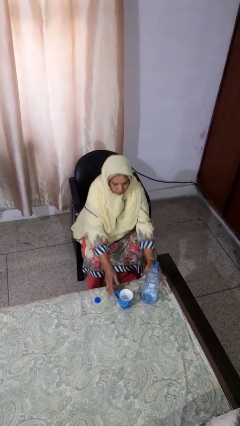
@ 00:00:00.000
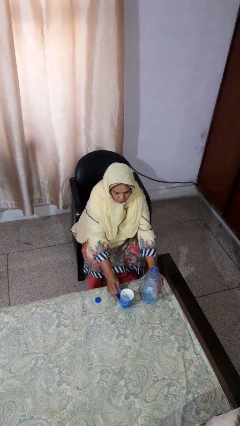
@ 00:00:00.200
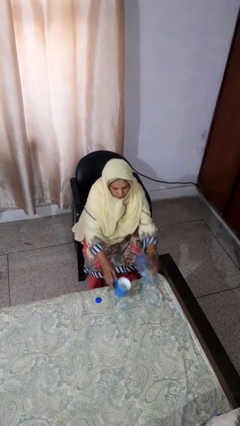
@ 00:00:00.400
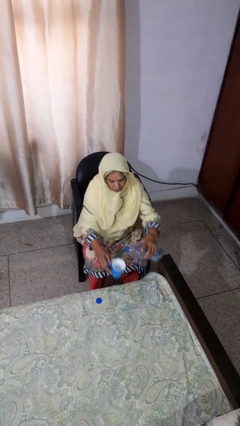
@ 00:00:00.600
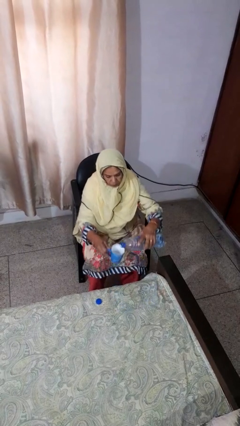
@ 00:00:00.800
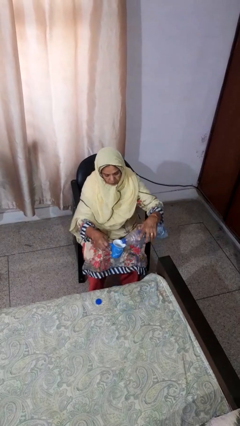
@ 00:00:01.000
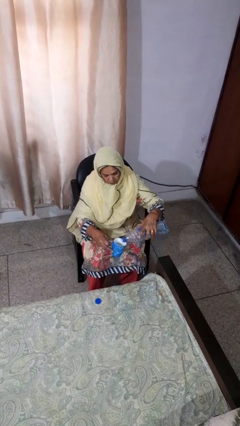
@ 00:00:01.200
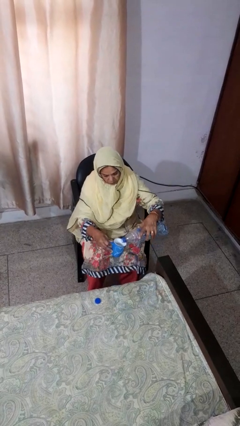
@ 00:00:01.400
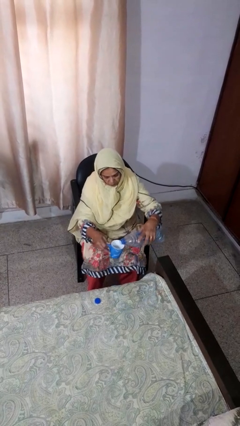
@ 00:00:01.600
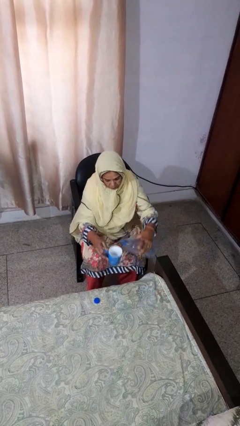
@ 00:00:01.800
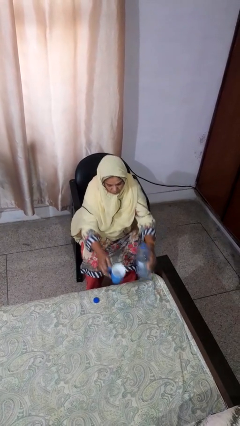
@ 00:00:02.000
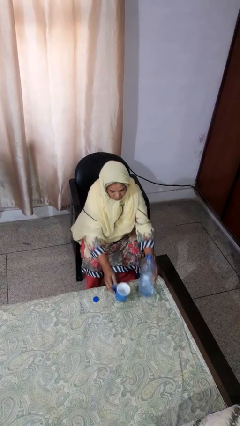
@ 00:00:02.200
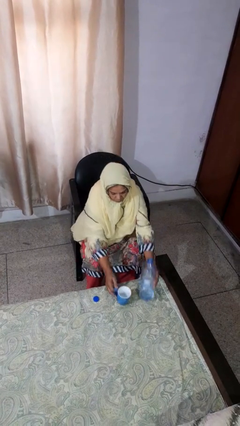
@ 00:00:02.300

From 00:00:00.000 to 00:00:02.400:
person pours liquid into cup

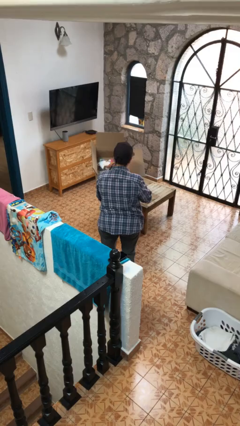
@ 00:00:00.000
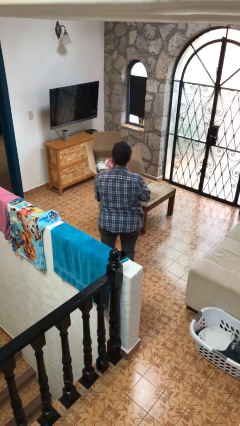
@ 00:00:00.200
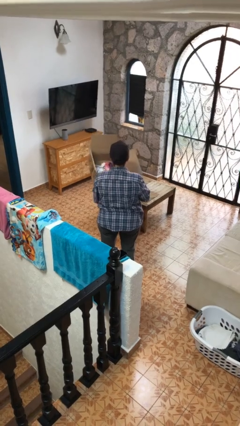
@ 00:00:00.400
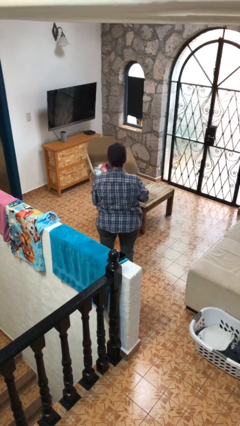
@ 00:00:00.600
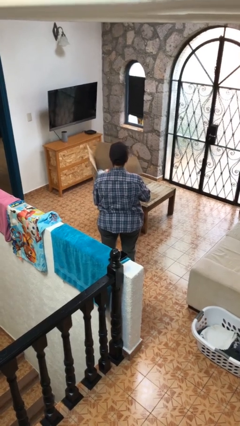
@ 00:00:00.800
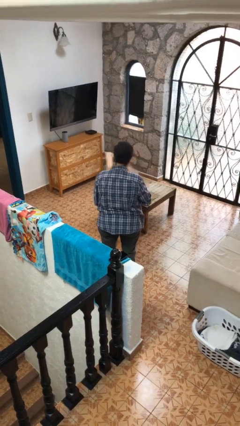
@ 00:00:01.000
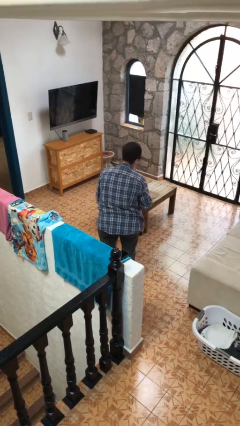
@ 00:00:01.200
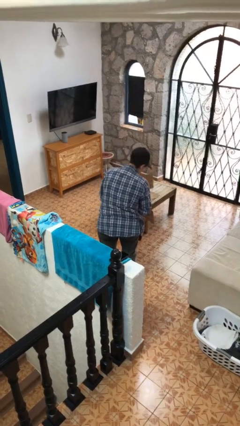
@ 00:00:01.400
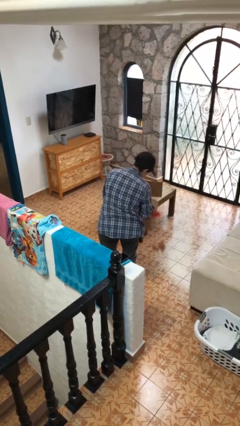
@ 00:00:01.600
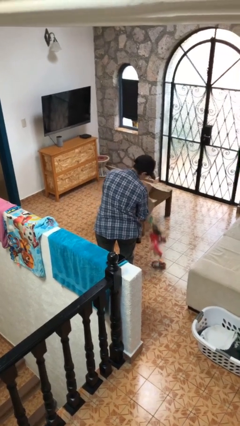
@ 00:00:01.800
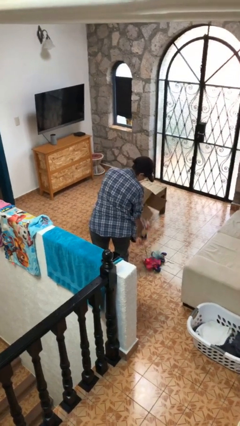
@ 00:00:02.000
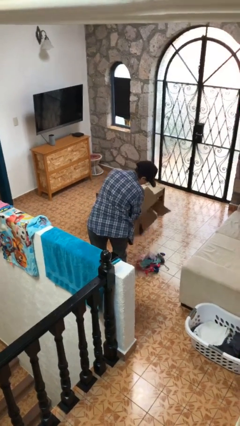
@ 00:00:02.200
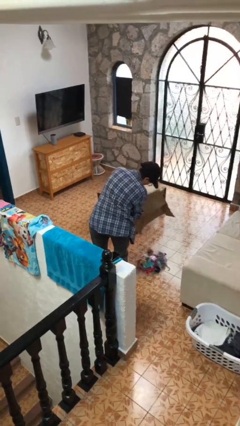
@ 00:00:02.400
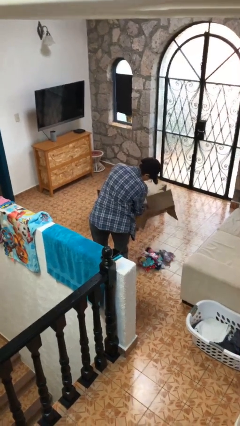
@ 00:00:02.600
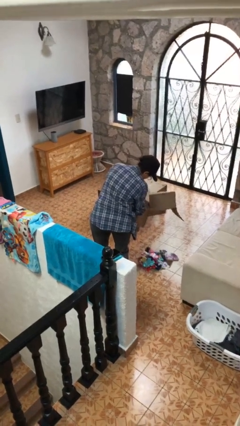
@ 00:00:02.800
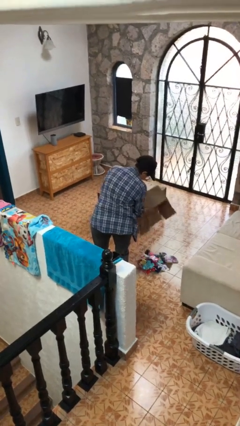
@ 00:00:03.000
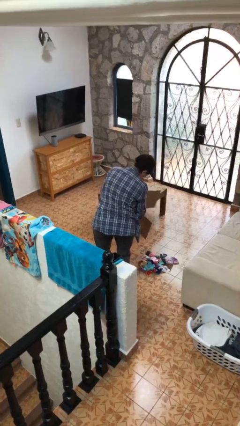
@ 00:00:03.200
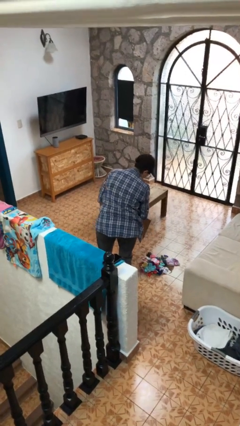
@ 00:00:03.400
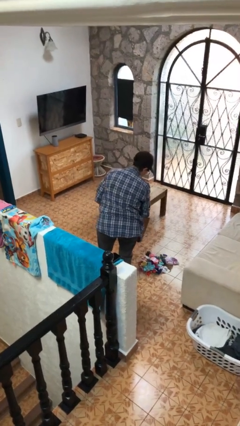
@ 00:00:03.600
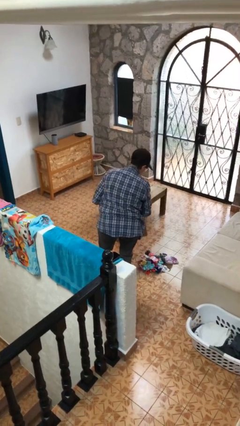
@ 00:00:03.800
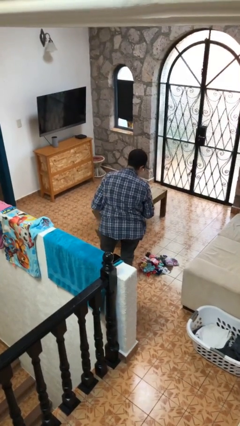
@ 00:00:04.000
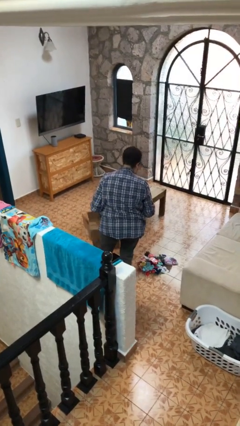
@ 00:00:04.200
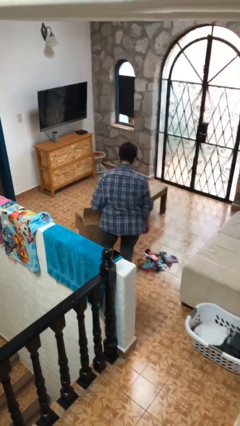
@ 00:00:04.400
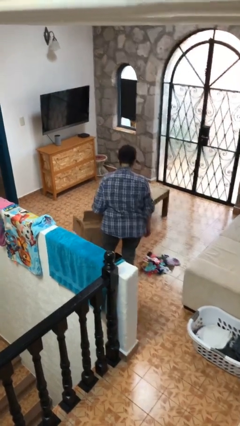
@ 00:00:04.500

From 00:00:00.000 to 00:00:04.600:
person unloads box onto floor

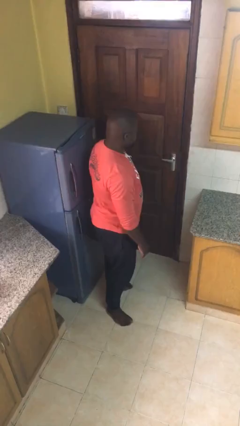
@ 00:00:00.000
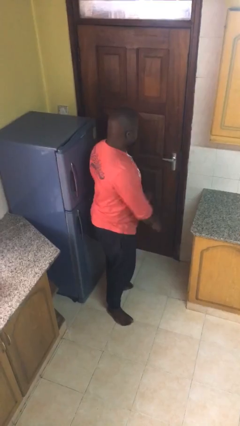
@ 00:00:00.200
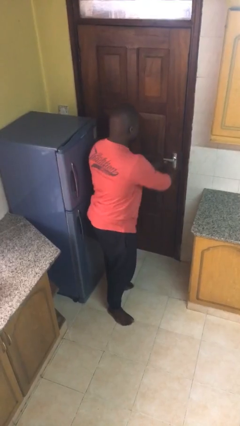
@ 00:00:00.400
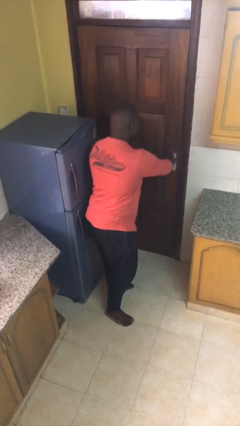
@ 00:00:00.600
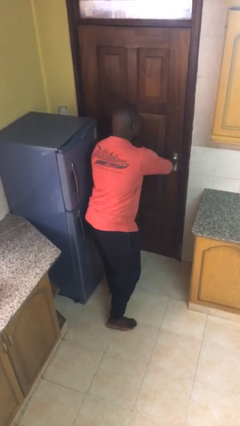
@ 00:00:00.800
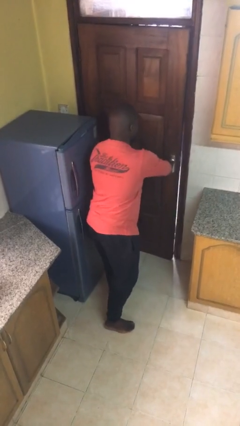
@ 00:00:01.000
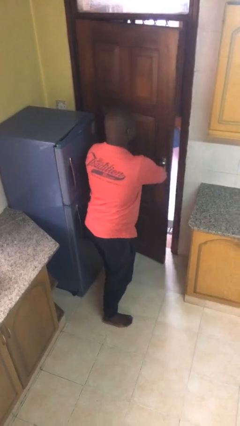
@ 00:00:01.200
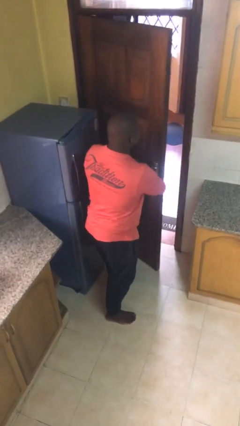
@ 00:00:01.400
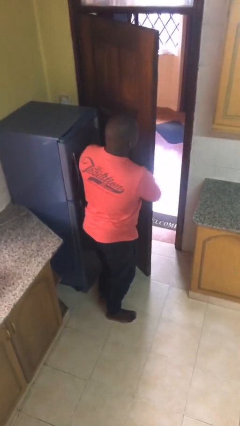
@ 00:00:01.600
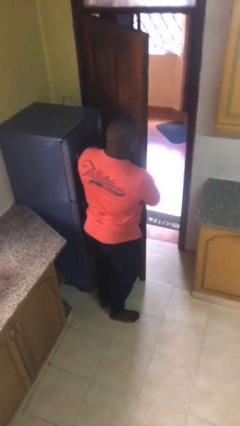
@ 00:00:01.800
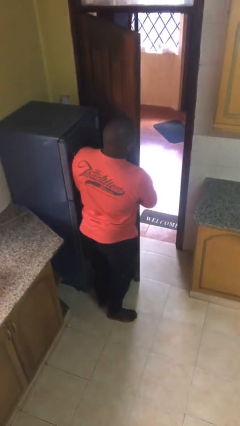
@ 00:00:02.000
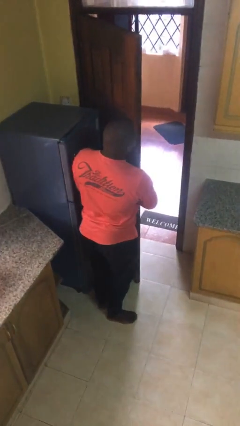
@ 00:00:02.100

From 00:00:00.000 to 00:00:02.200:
person opens facility door

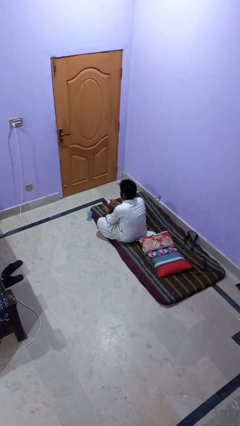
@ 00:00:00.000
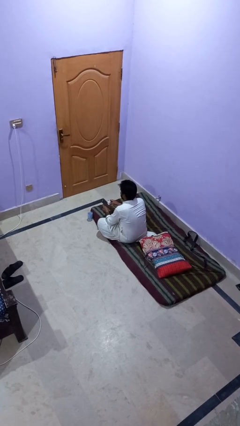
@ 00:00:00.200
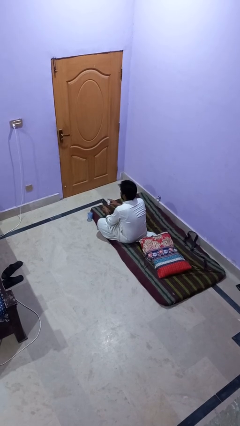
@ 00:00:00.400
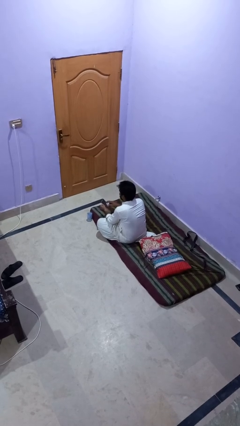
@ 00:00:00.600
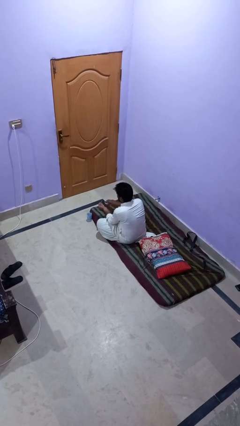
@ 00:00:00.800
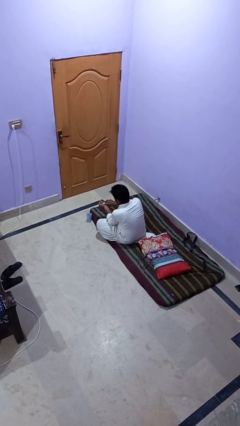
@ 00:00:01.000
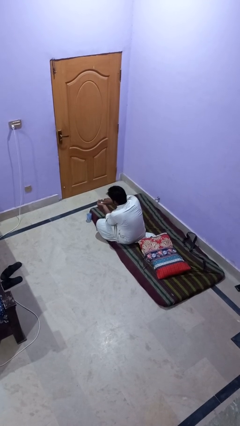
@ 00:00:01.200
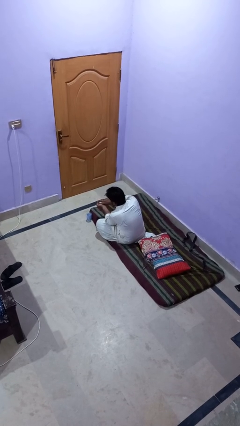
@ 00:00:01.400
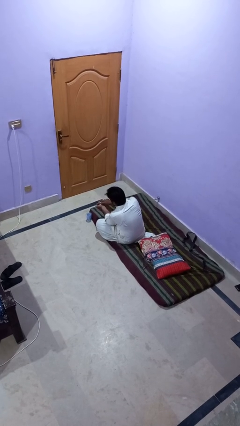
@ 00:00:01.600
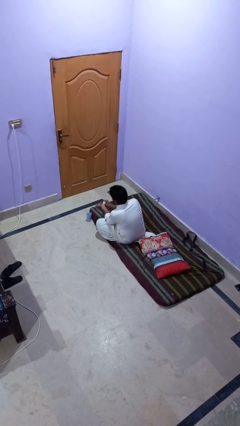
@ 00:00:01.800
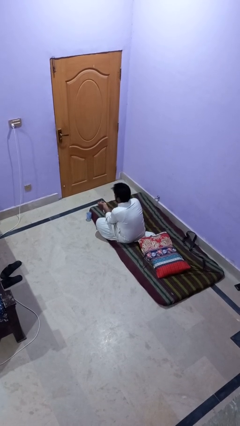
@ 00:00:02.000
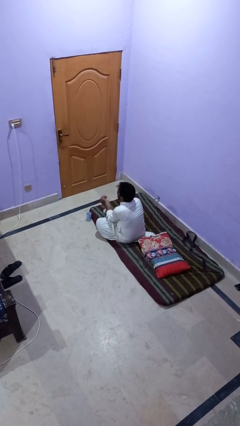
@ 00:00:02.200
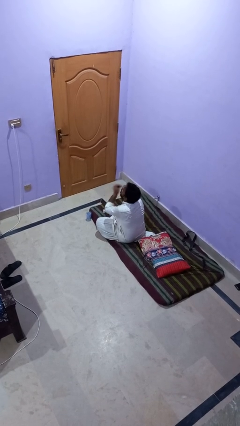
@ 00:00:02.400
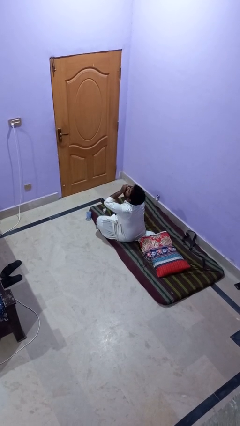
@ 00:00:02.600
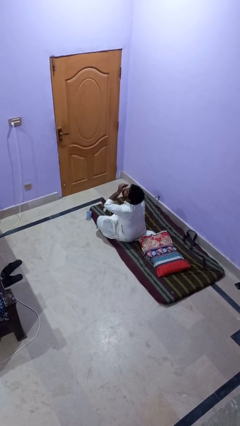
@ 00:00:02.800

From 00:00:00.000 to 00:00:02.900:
person takes medicine pills

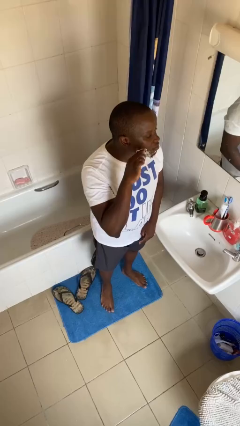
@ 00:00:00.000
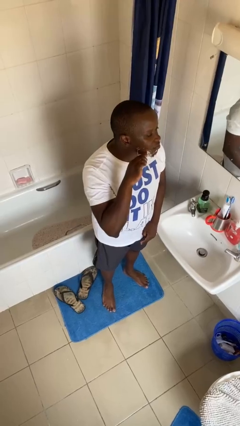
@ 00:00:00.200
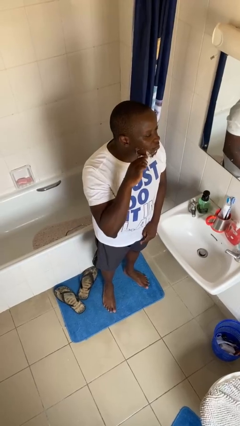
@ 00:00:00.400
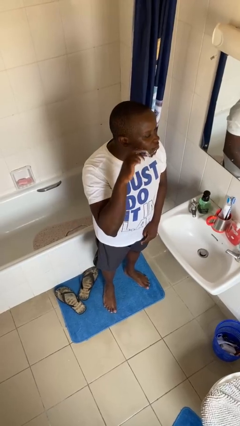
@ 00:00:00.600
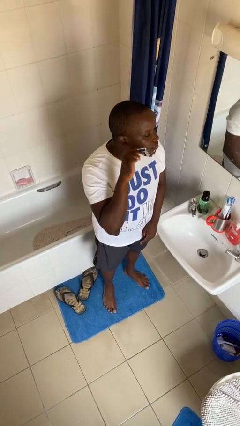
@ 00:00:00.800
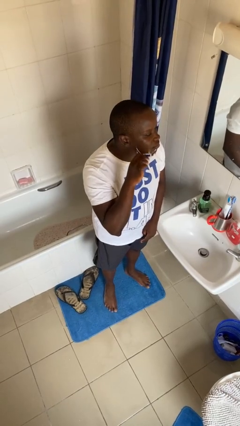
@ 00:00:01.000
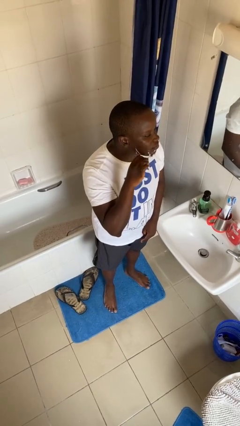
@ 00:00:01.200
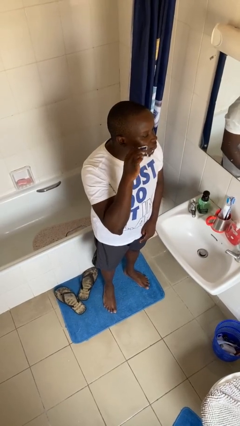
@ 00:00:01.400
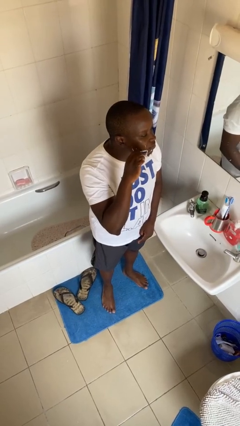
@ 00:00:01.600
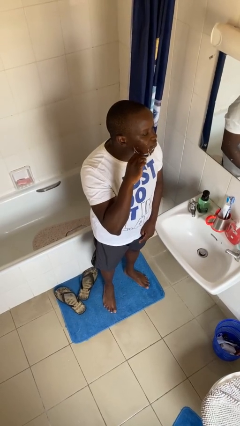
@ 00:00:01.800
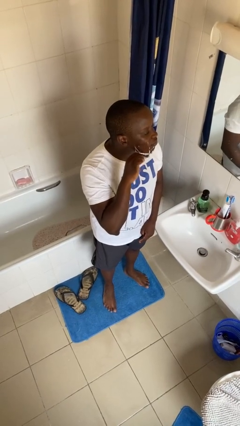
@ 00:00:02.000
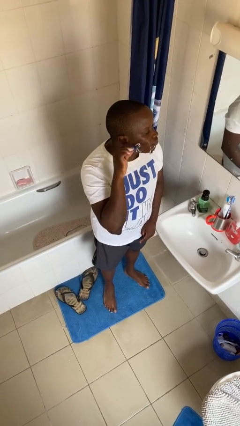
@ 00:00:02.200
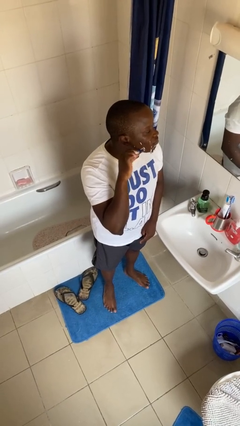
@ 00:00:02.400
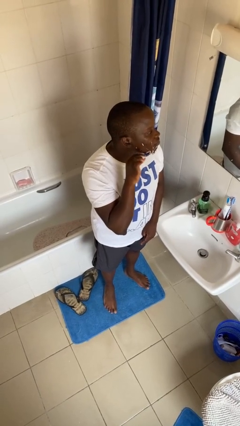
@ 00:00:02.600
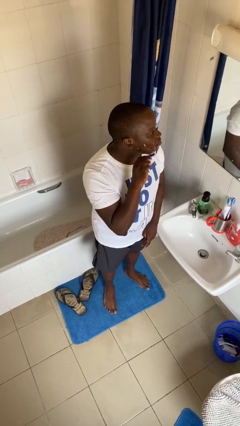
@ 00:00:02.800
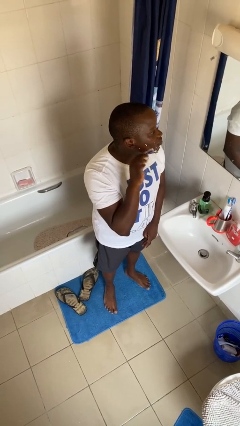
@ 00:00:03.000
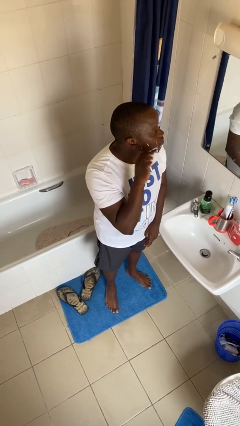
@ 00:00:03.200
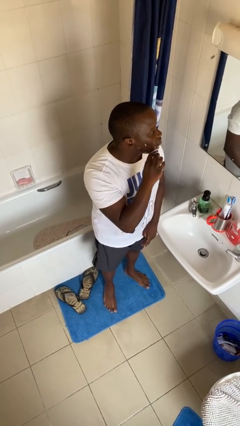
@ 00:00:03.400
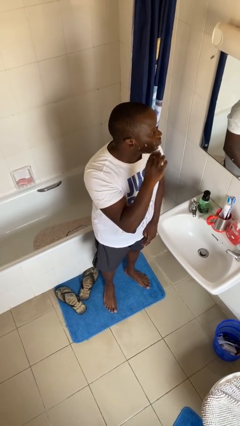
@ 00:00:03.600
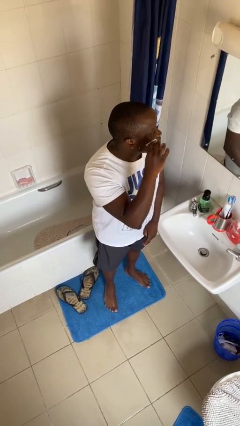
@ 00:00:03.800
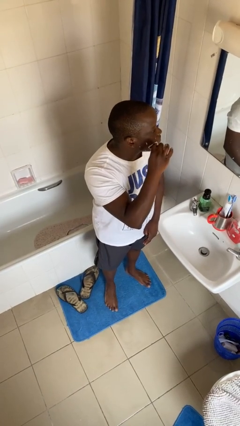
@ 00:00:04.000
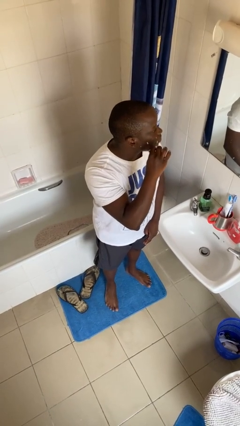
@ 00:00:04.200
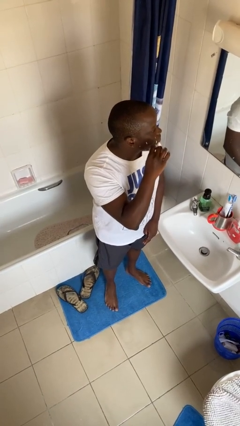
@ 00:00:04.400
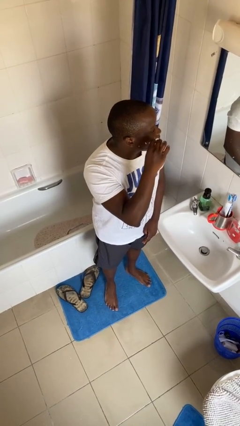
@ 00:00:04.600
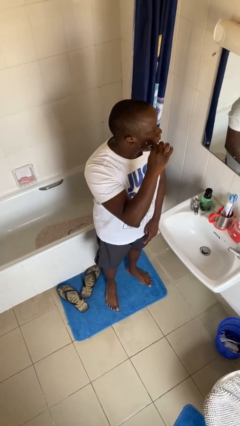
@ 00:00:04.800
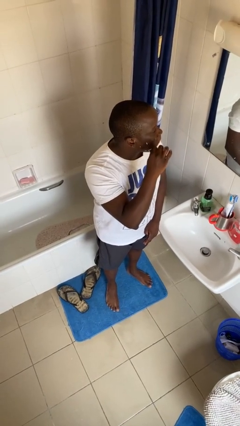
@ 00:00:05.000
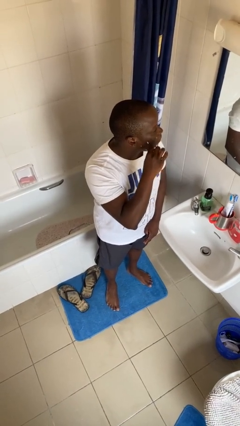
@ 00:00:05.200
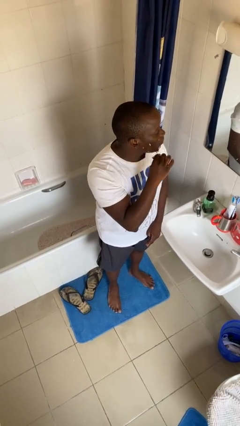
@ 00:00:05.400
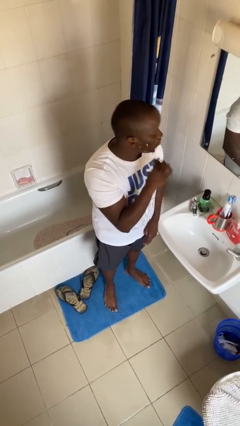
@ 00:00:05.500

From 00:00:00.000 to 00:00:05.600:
person shaves face
